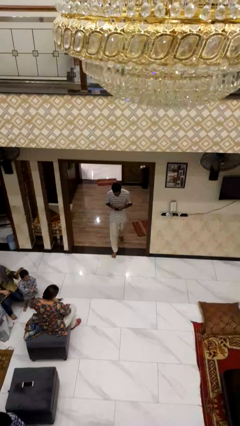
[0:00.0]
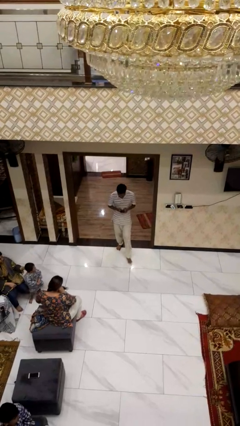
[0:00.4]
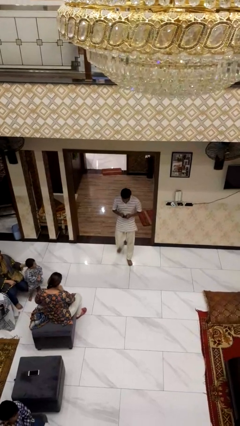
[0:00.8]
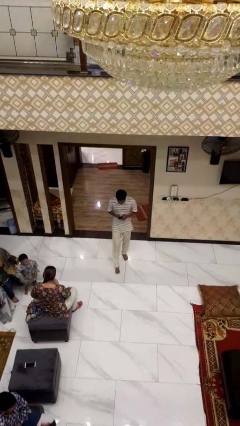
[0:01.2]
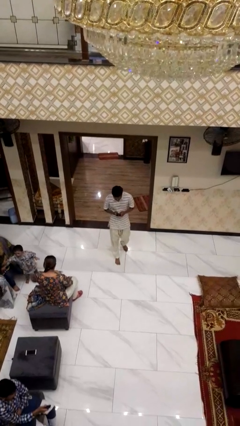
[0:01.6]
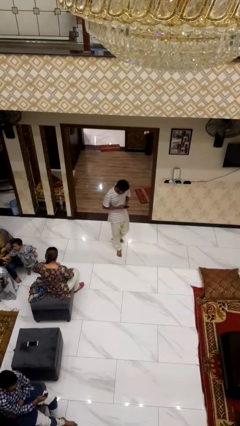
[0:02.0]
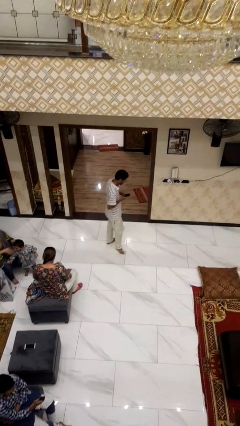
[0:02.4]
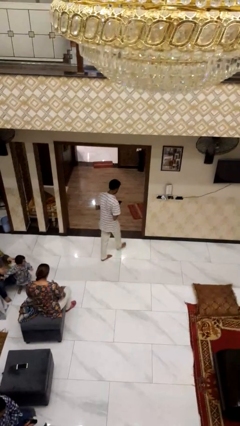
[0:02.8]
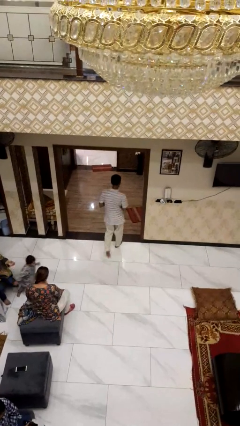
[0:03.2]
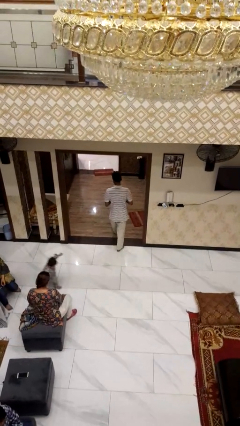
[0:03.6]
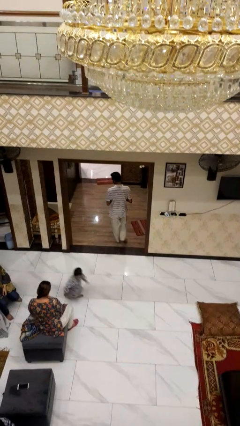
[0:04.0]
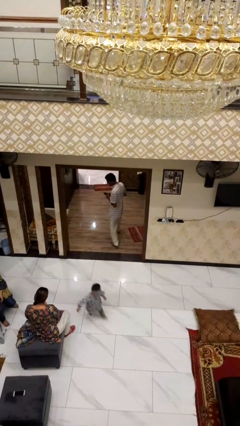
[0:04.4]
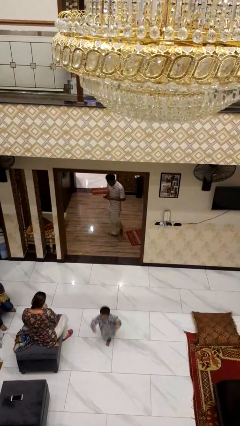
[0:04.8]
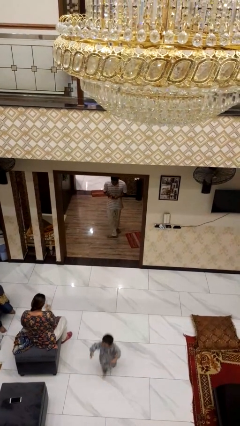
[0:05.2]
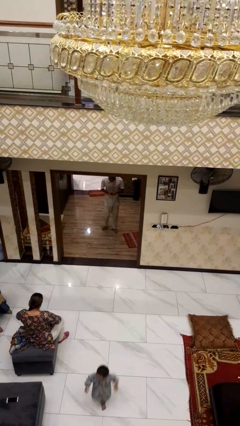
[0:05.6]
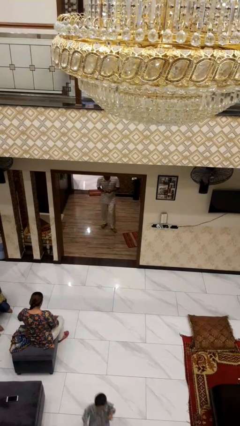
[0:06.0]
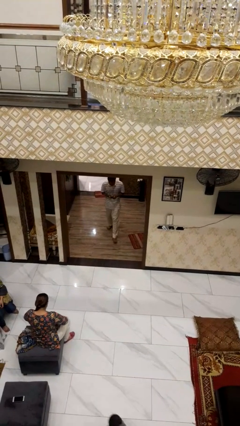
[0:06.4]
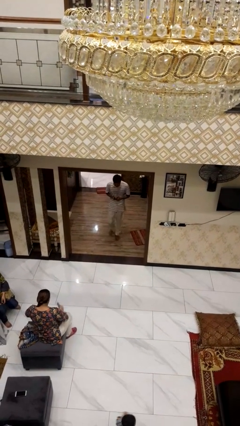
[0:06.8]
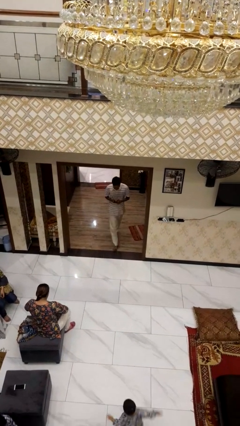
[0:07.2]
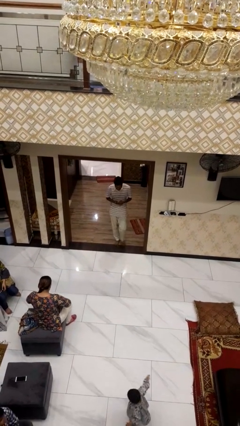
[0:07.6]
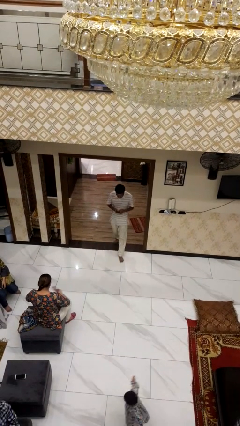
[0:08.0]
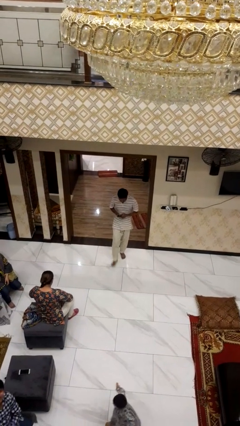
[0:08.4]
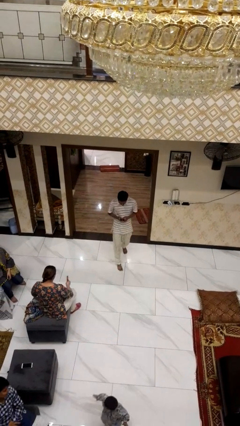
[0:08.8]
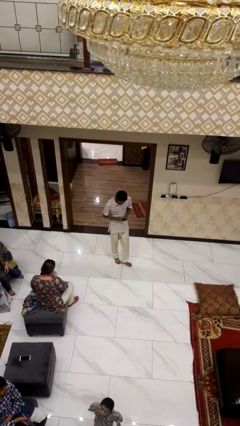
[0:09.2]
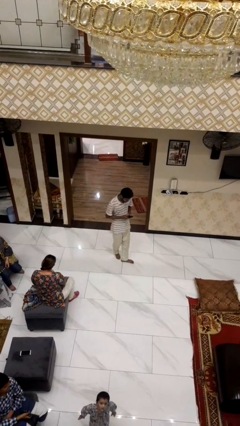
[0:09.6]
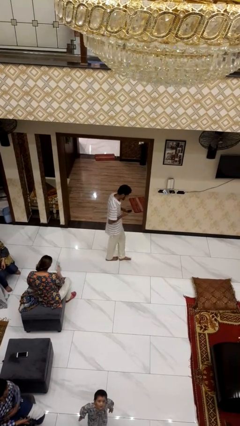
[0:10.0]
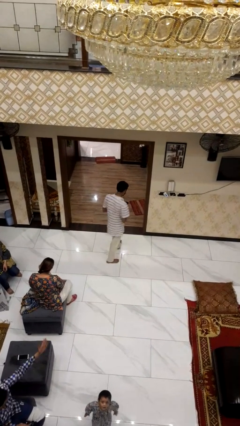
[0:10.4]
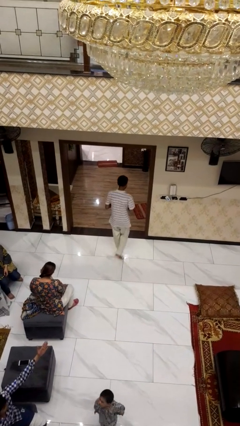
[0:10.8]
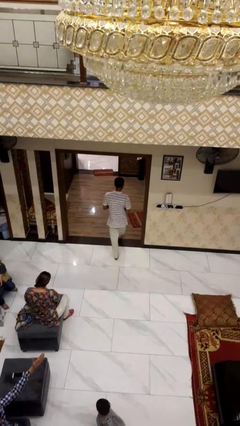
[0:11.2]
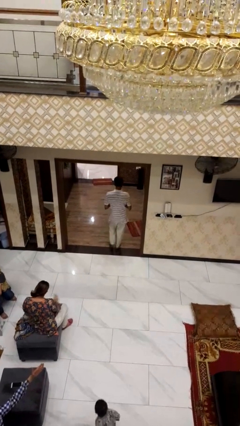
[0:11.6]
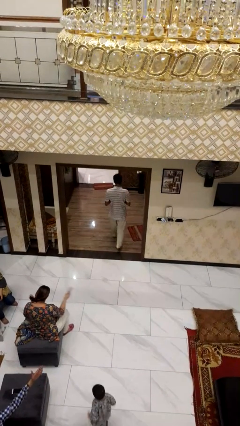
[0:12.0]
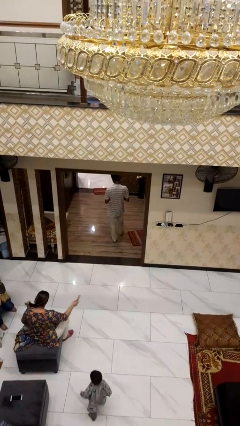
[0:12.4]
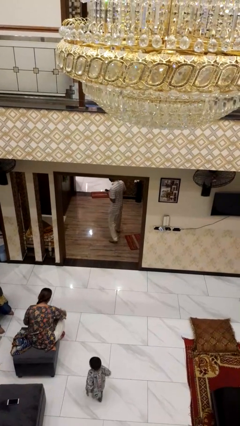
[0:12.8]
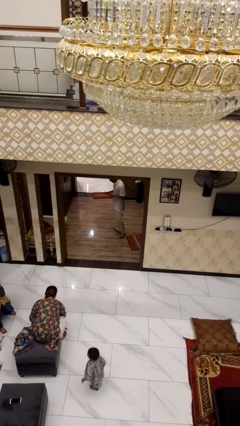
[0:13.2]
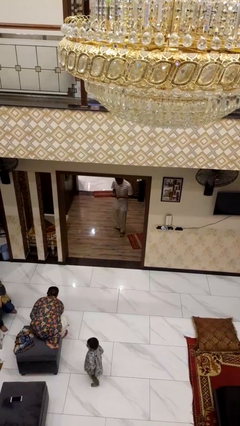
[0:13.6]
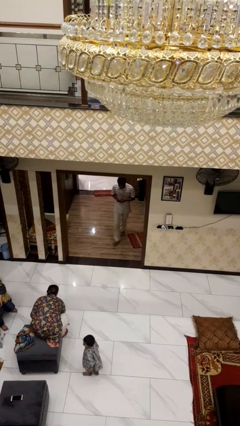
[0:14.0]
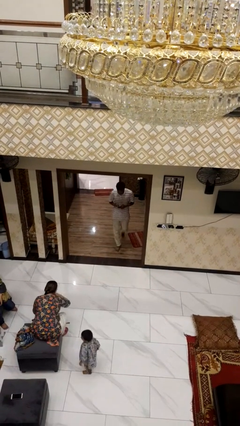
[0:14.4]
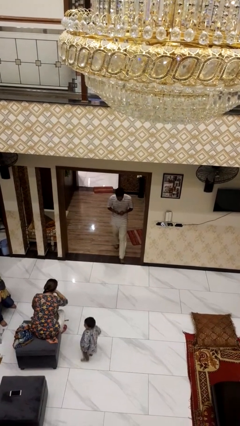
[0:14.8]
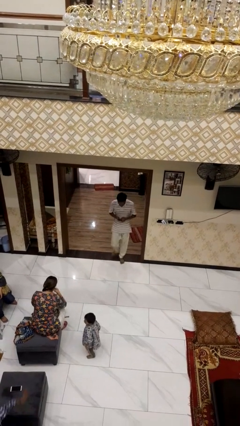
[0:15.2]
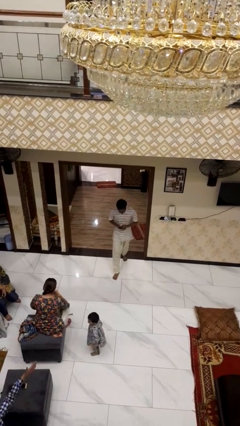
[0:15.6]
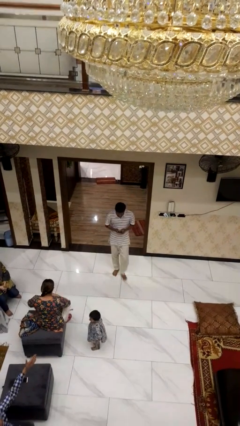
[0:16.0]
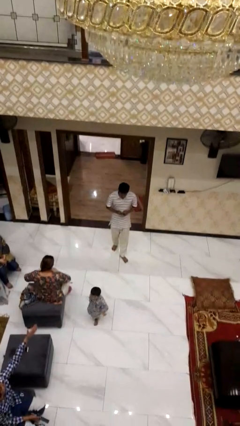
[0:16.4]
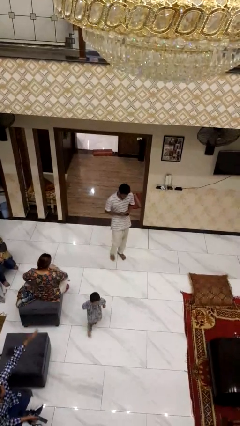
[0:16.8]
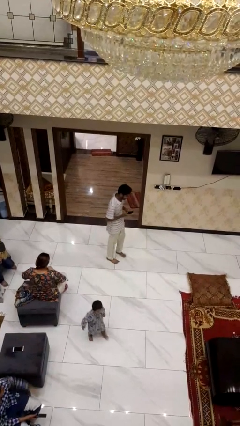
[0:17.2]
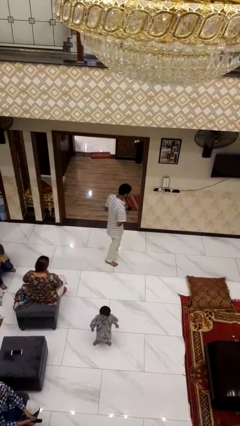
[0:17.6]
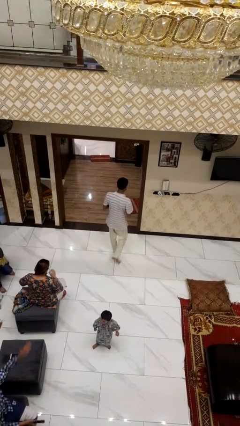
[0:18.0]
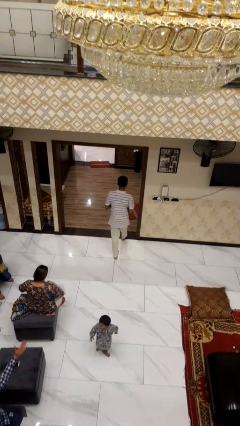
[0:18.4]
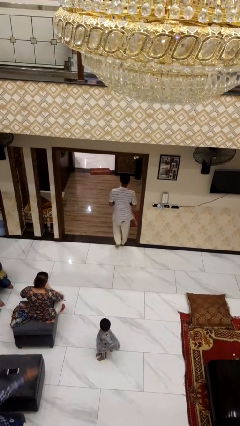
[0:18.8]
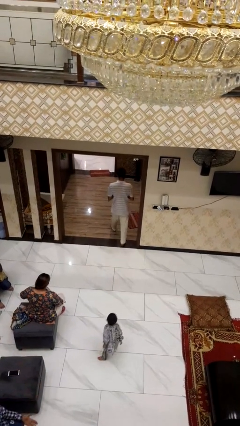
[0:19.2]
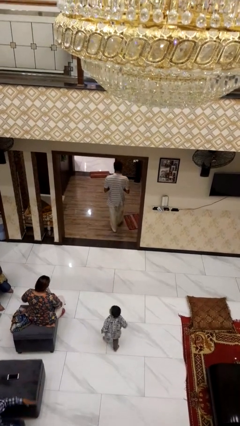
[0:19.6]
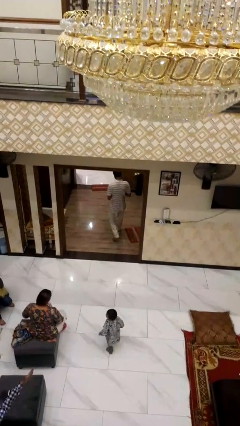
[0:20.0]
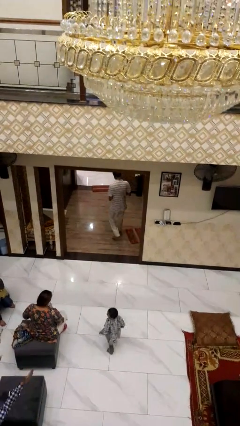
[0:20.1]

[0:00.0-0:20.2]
person texts on phone

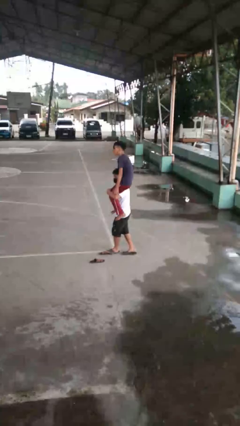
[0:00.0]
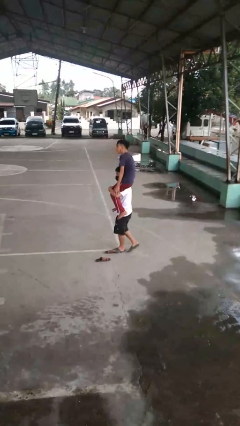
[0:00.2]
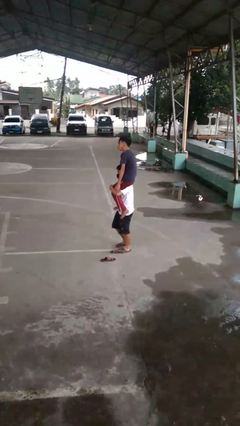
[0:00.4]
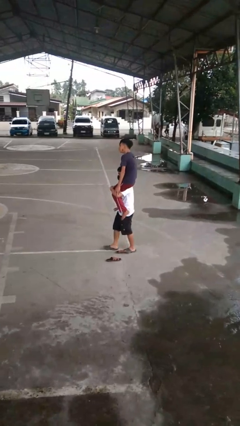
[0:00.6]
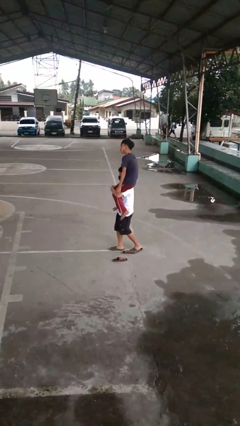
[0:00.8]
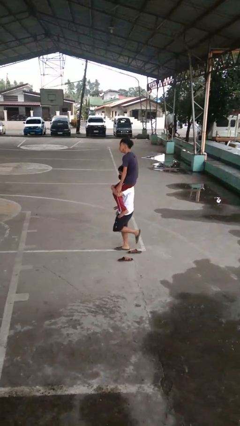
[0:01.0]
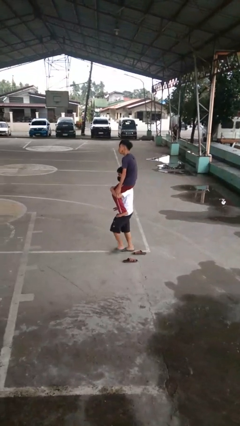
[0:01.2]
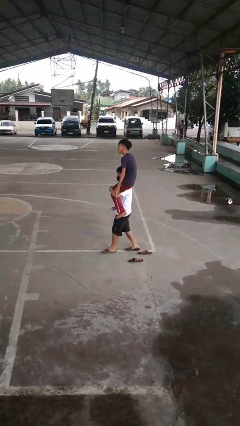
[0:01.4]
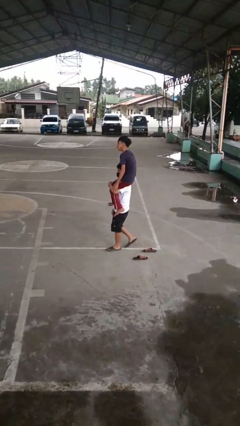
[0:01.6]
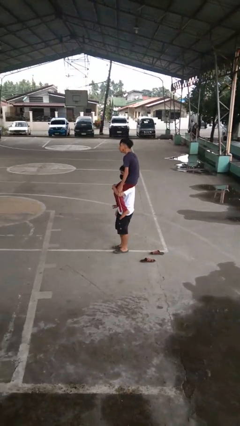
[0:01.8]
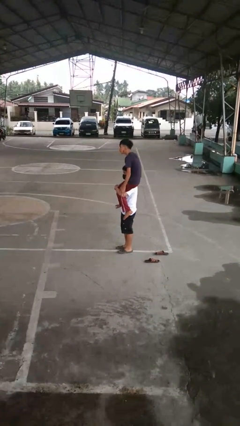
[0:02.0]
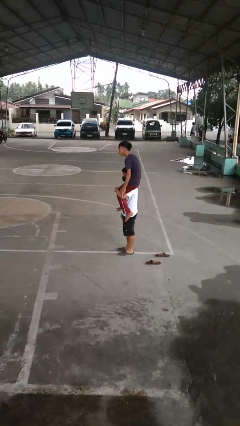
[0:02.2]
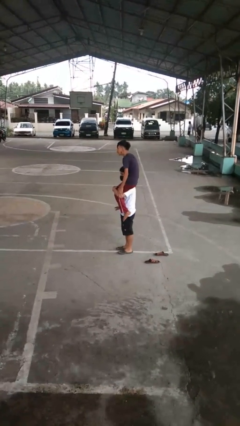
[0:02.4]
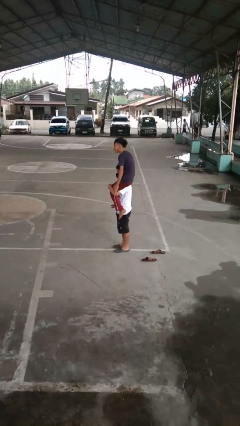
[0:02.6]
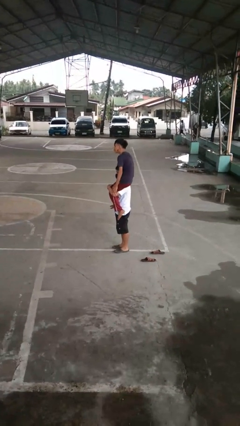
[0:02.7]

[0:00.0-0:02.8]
person carries person on shoulders

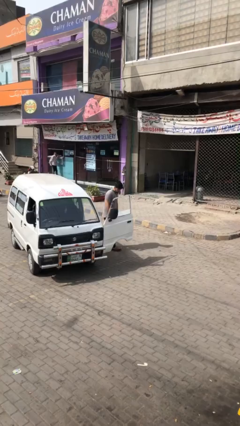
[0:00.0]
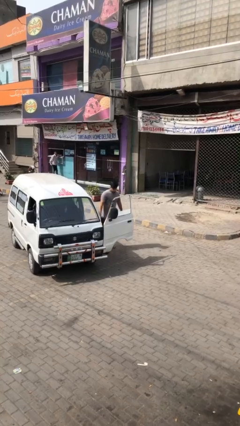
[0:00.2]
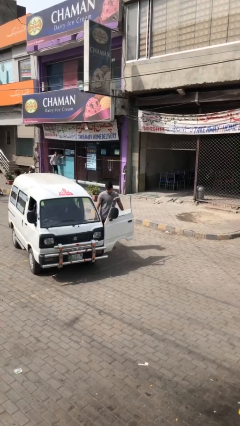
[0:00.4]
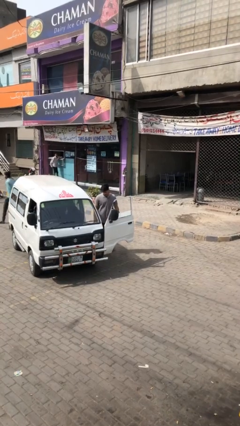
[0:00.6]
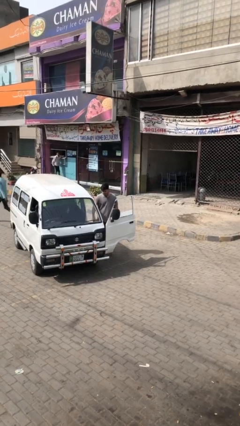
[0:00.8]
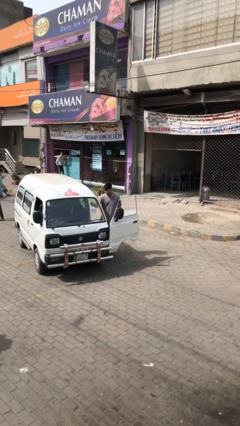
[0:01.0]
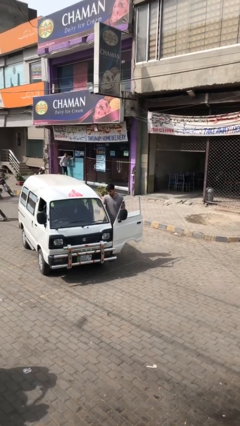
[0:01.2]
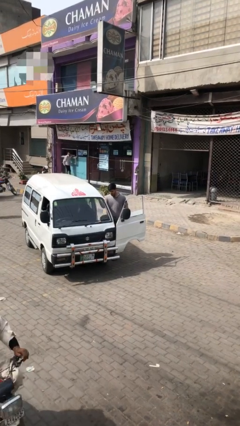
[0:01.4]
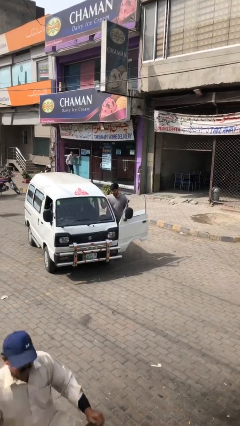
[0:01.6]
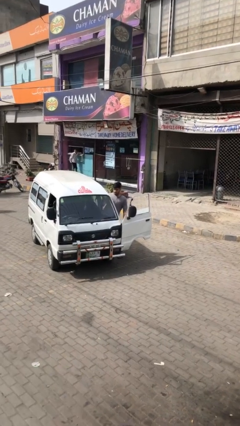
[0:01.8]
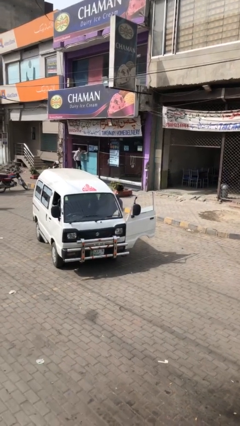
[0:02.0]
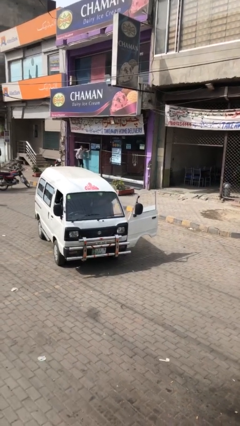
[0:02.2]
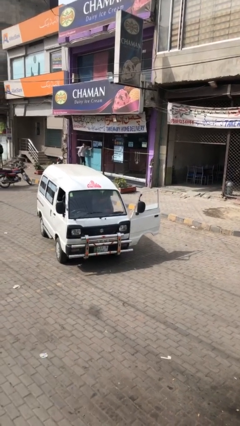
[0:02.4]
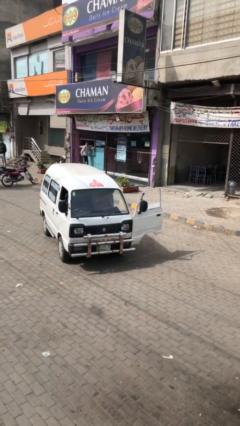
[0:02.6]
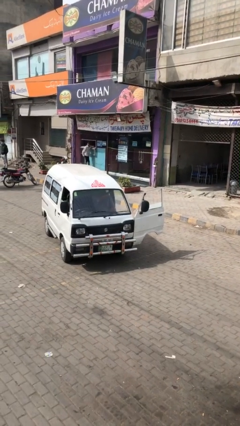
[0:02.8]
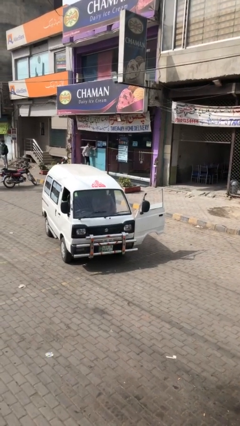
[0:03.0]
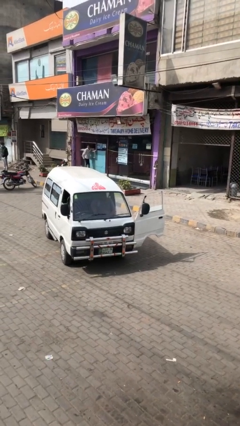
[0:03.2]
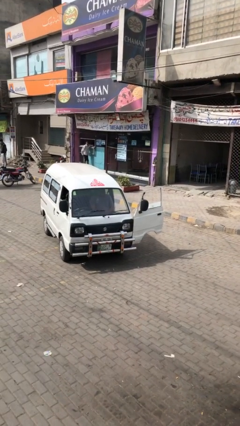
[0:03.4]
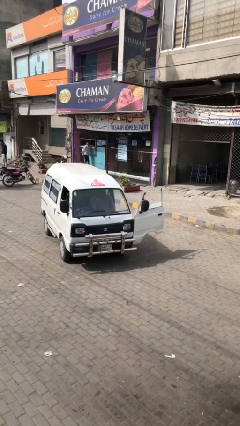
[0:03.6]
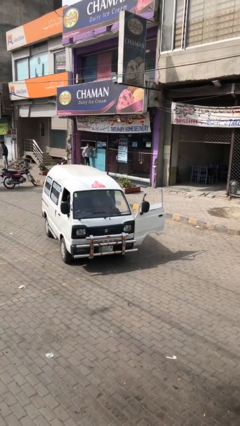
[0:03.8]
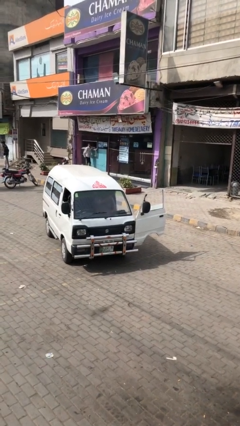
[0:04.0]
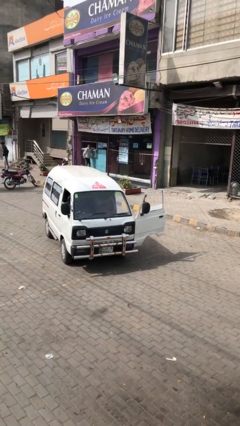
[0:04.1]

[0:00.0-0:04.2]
person enters car

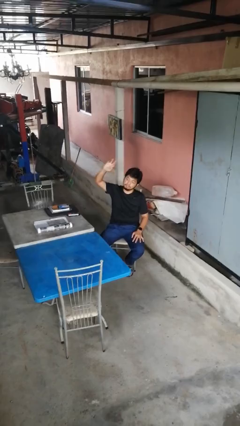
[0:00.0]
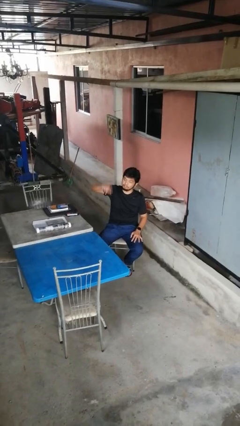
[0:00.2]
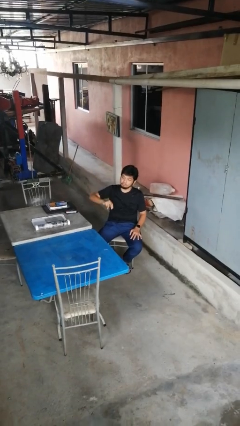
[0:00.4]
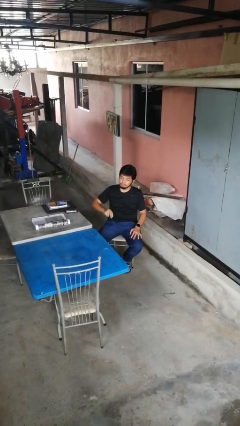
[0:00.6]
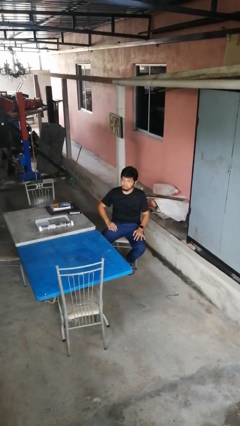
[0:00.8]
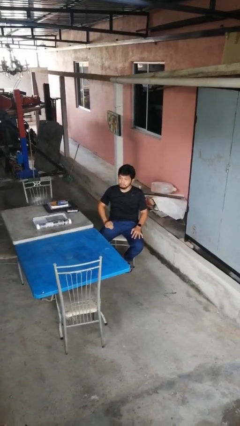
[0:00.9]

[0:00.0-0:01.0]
person gestures swipe down
